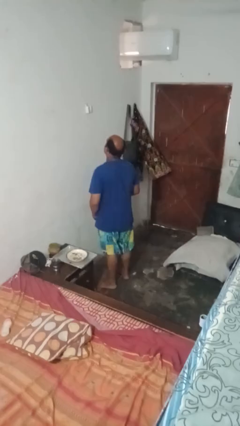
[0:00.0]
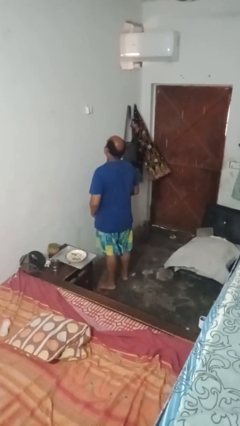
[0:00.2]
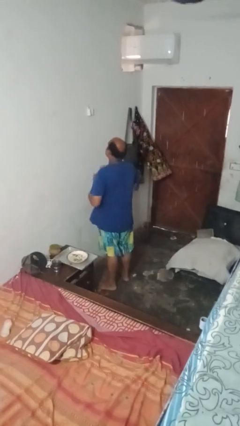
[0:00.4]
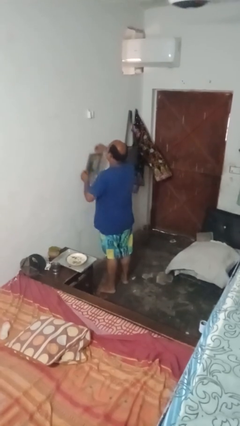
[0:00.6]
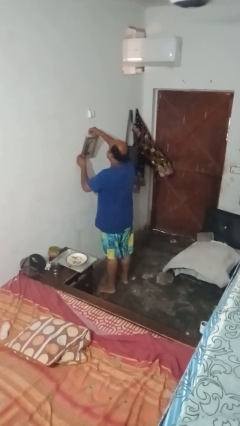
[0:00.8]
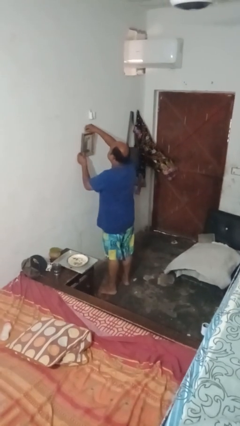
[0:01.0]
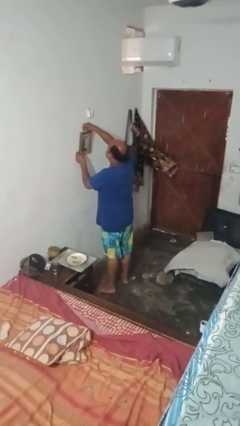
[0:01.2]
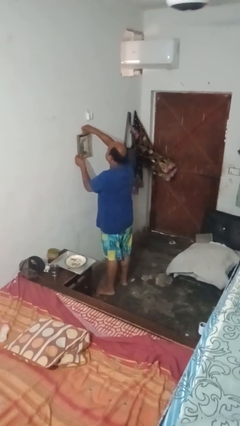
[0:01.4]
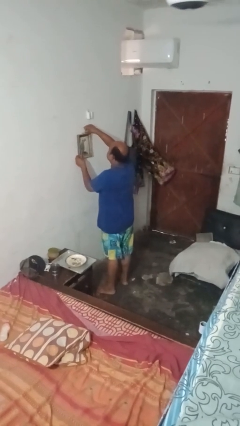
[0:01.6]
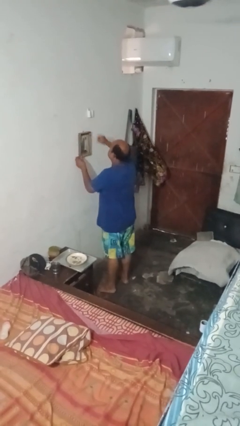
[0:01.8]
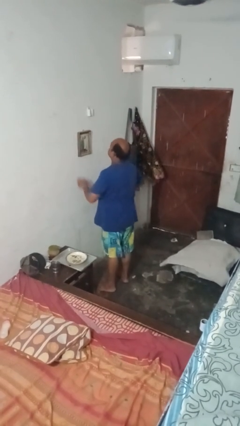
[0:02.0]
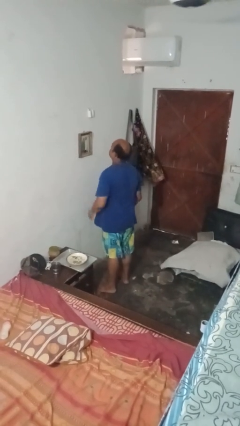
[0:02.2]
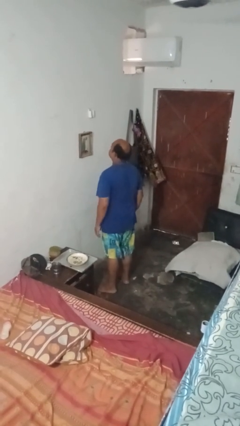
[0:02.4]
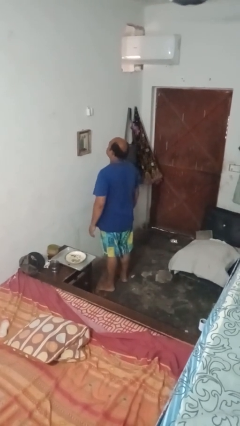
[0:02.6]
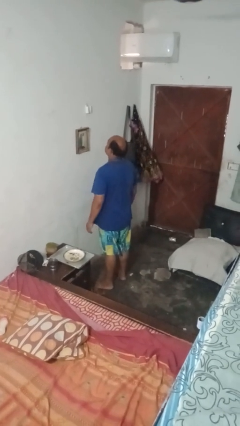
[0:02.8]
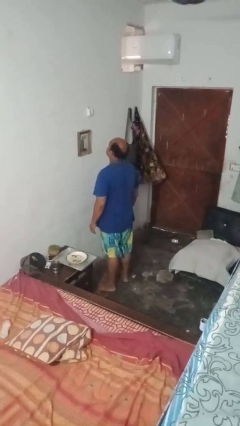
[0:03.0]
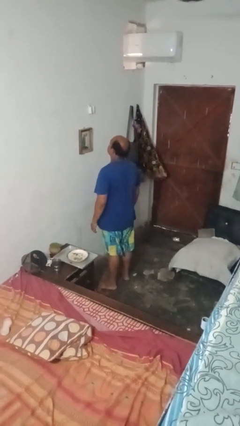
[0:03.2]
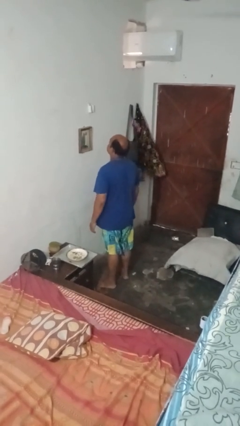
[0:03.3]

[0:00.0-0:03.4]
person puts up picture frame

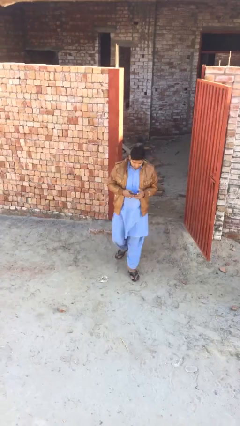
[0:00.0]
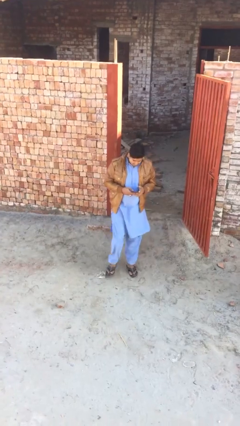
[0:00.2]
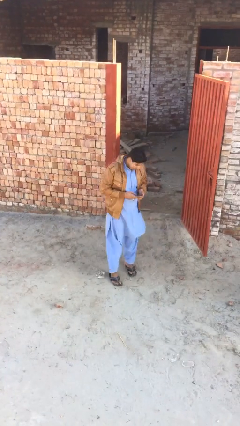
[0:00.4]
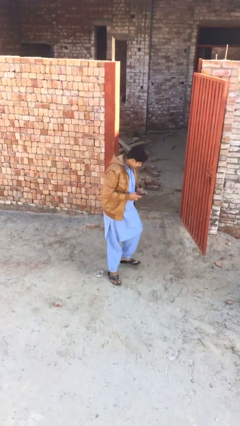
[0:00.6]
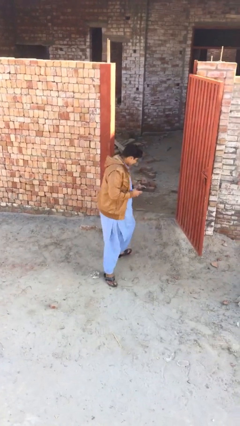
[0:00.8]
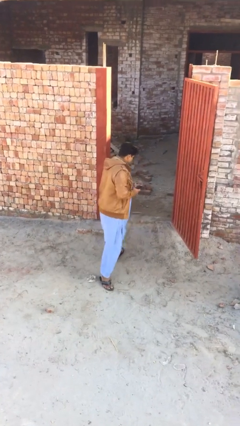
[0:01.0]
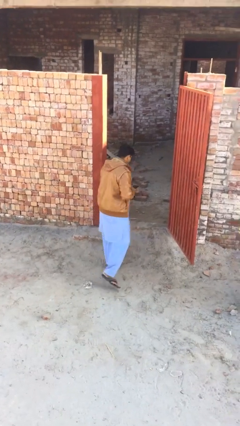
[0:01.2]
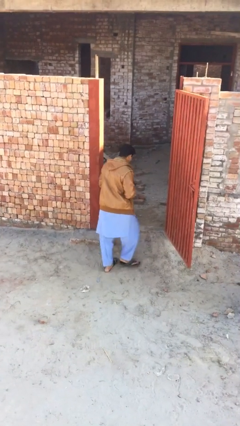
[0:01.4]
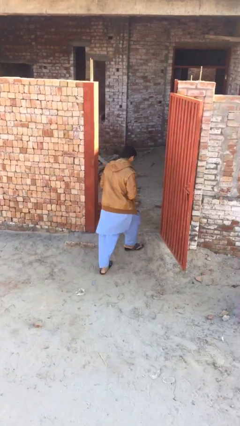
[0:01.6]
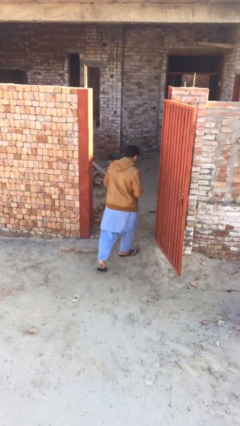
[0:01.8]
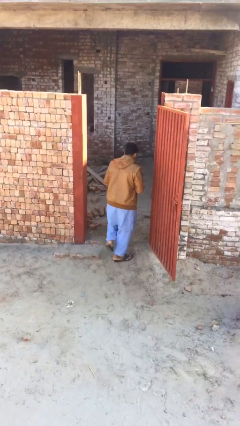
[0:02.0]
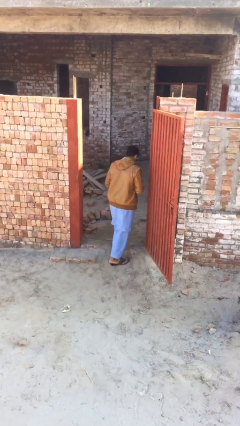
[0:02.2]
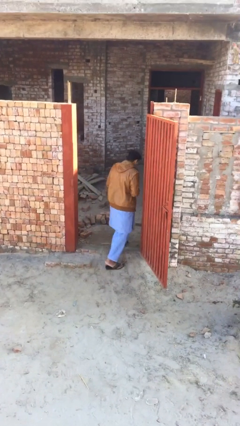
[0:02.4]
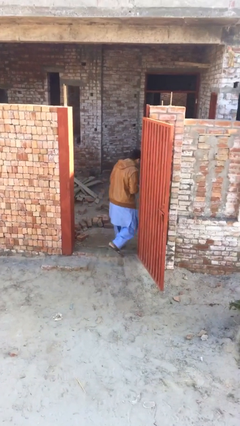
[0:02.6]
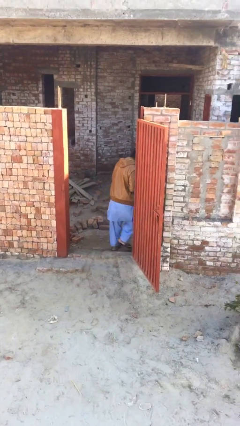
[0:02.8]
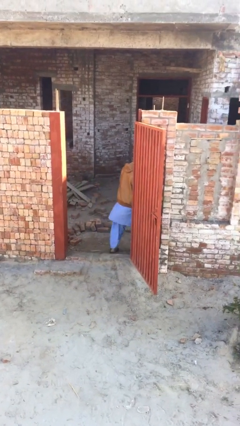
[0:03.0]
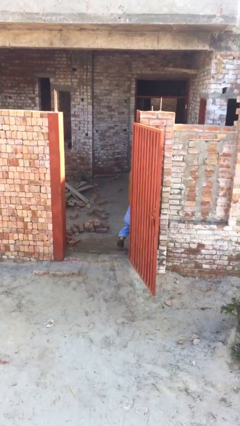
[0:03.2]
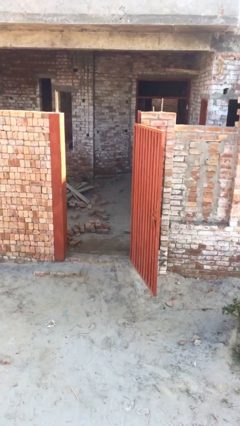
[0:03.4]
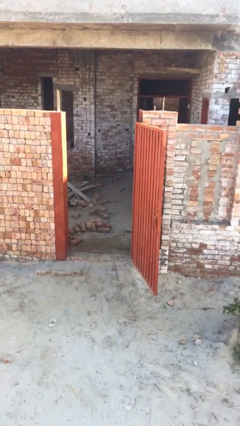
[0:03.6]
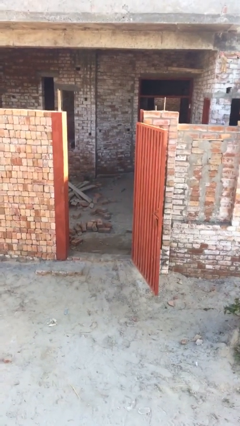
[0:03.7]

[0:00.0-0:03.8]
person exits scene through structure

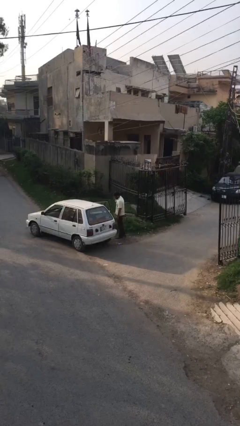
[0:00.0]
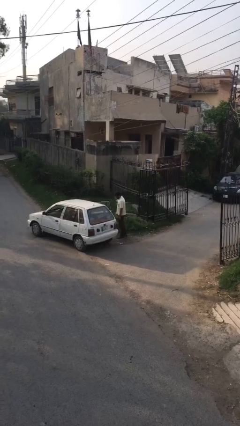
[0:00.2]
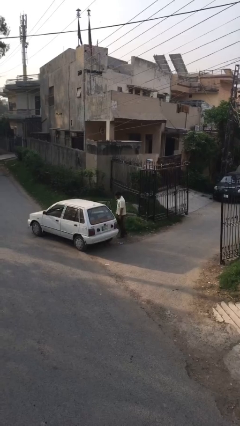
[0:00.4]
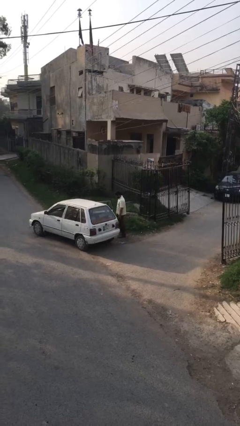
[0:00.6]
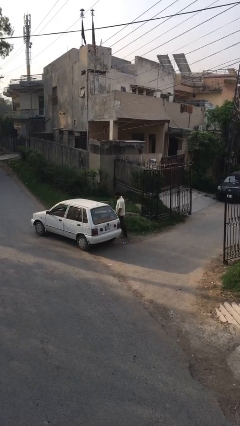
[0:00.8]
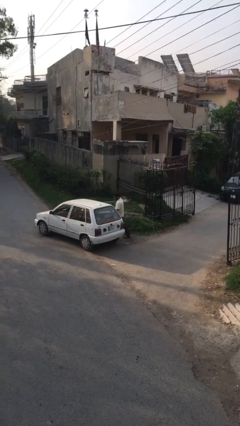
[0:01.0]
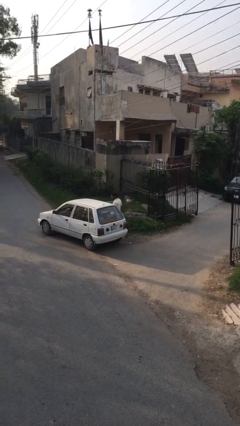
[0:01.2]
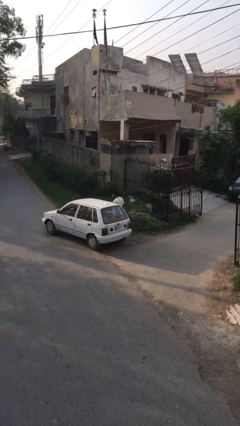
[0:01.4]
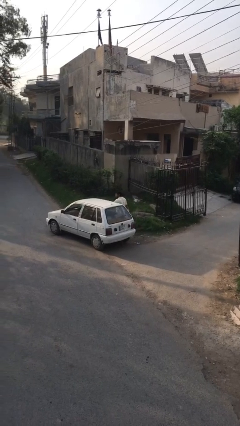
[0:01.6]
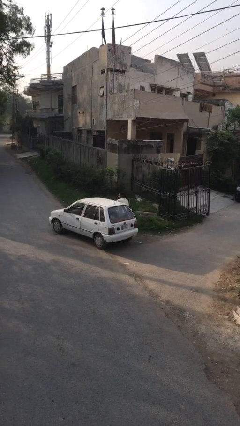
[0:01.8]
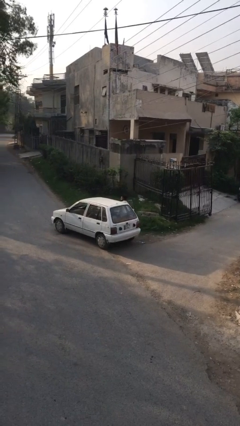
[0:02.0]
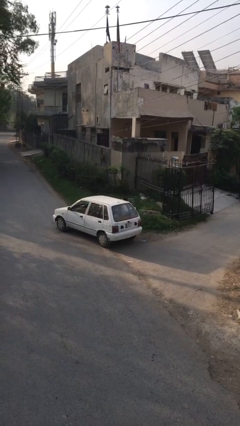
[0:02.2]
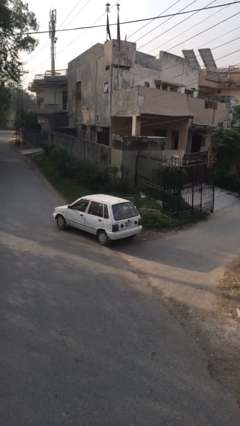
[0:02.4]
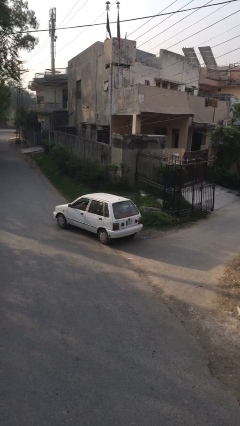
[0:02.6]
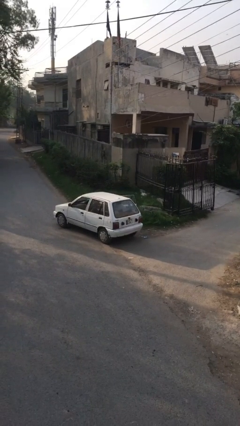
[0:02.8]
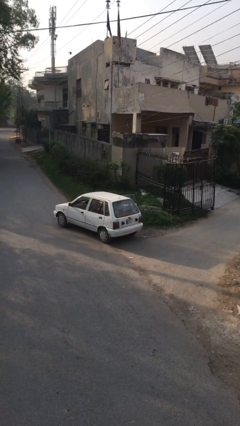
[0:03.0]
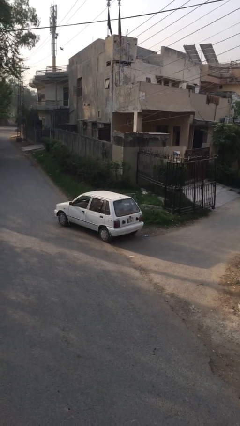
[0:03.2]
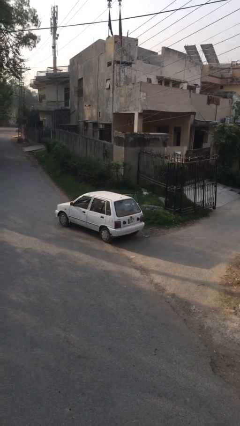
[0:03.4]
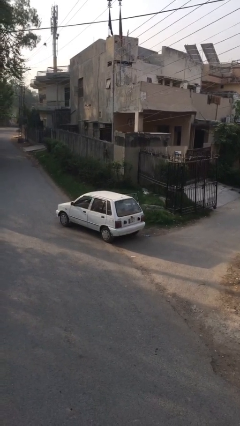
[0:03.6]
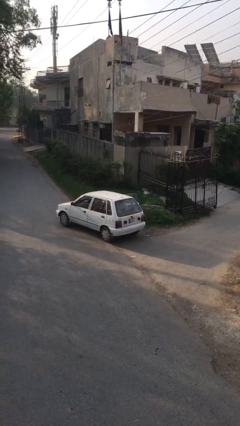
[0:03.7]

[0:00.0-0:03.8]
person enters car

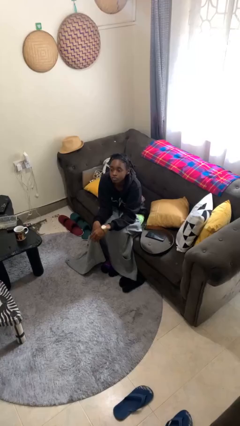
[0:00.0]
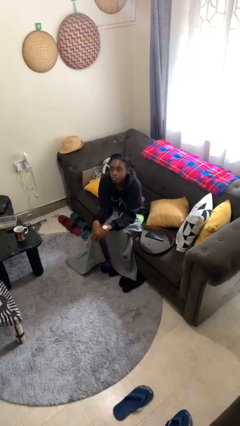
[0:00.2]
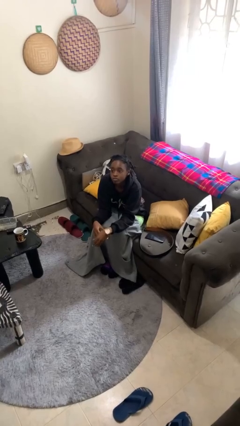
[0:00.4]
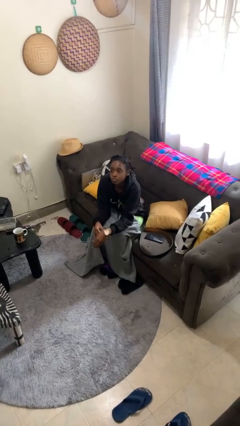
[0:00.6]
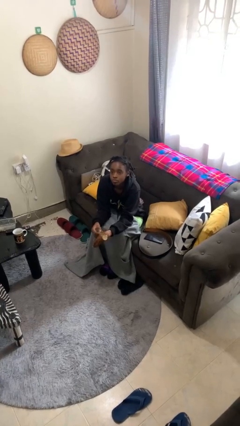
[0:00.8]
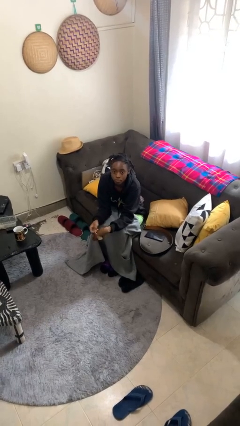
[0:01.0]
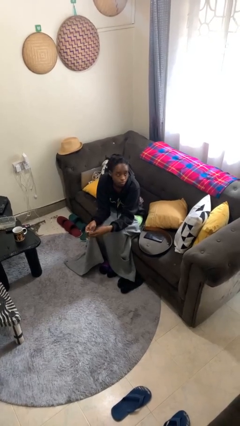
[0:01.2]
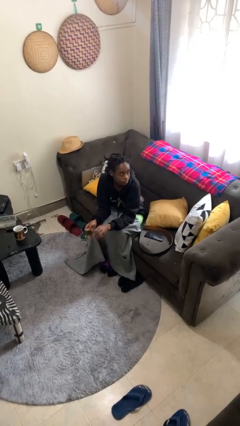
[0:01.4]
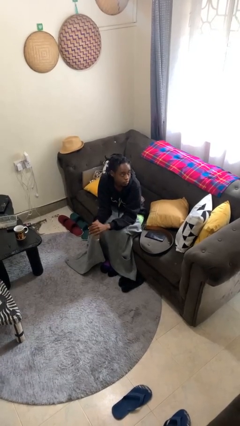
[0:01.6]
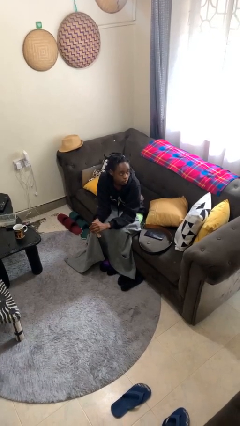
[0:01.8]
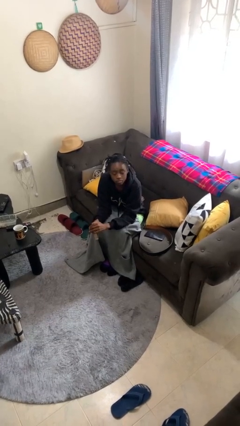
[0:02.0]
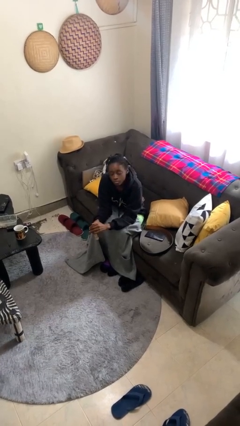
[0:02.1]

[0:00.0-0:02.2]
person takes off wristwatch

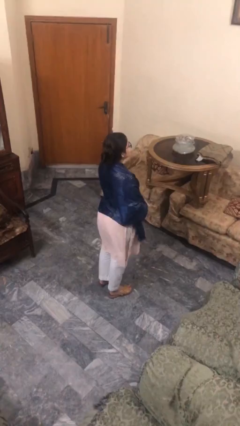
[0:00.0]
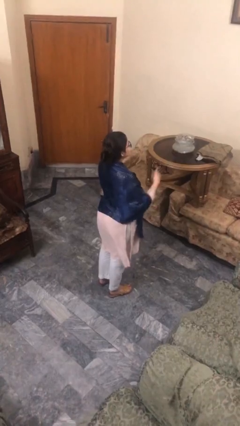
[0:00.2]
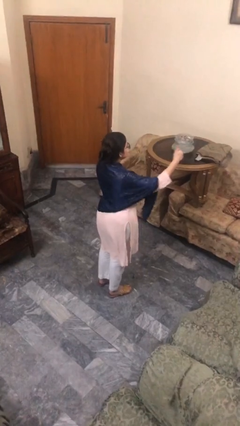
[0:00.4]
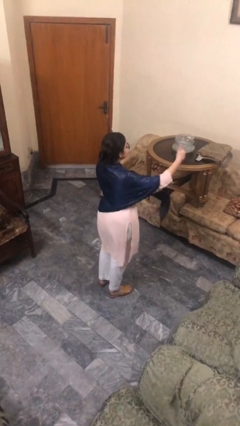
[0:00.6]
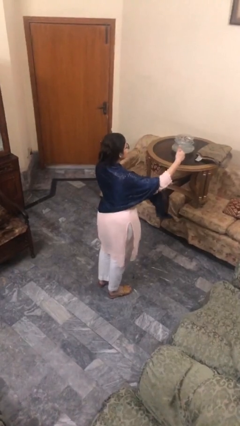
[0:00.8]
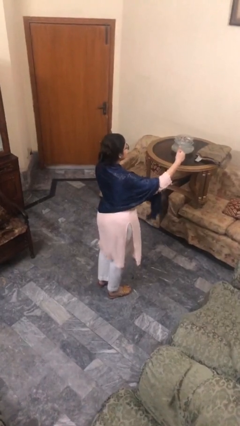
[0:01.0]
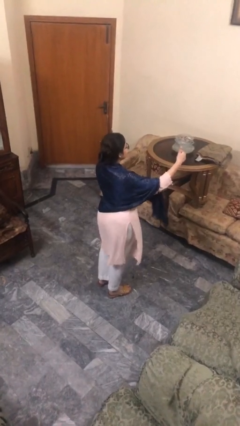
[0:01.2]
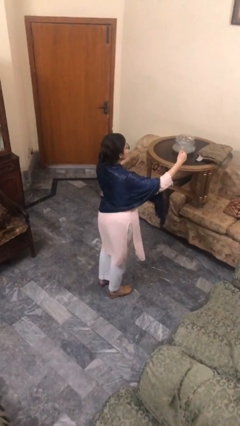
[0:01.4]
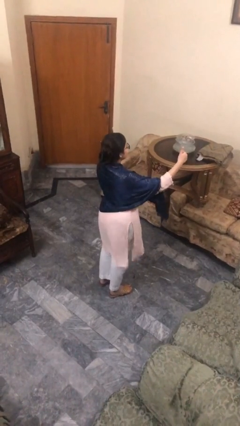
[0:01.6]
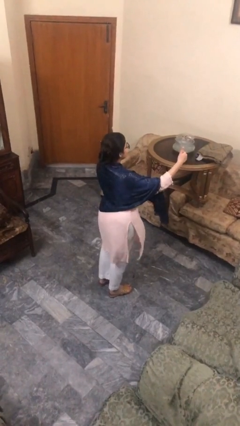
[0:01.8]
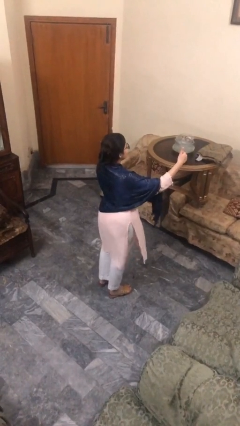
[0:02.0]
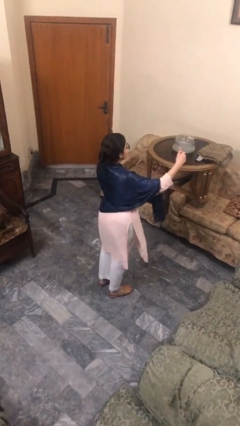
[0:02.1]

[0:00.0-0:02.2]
person gestures thumbs up

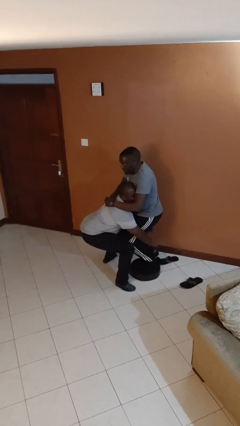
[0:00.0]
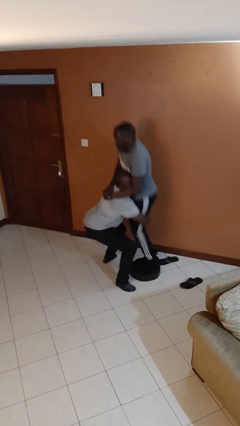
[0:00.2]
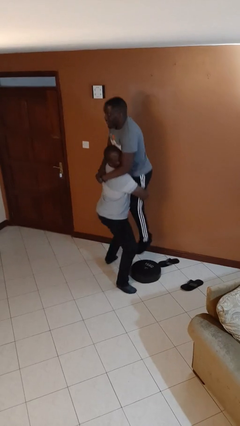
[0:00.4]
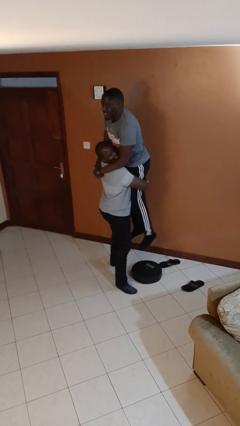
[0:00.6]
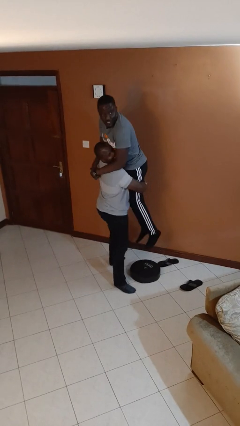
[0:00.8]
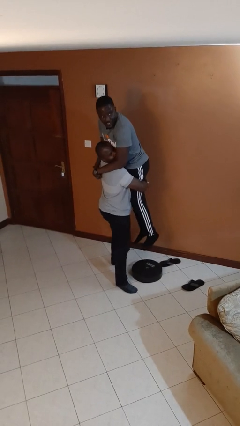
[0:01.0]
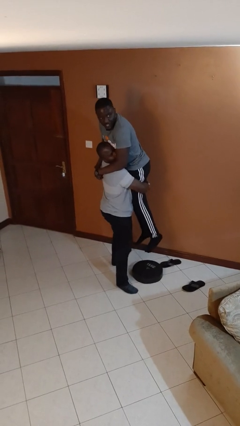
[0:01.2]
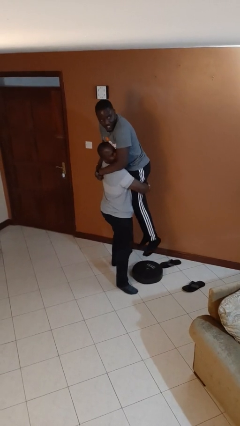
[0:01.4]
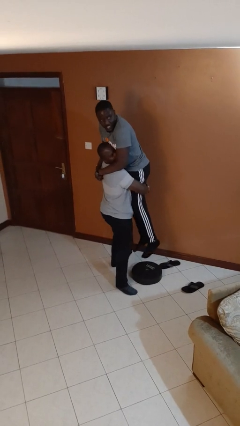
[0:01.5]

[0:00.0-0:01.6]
person picks up person
